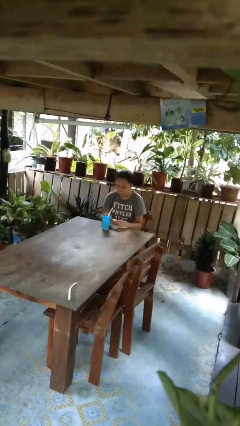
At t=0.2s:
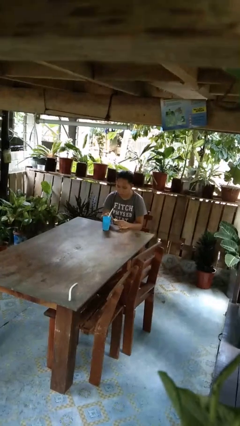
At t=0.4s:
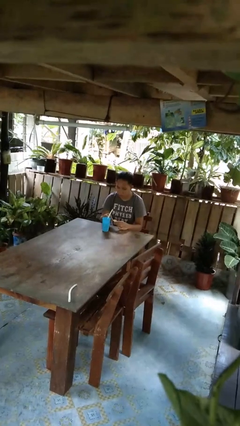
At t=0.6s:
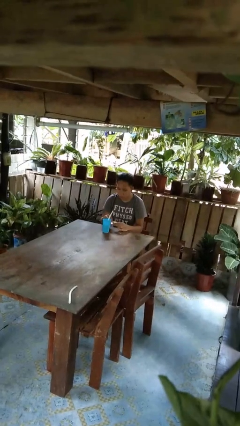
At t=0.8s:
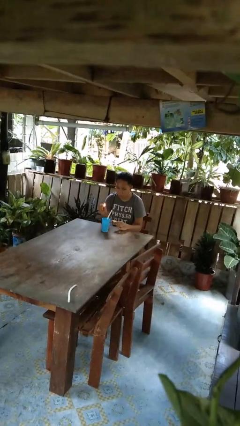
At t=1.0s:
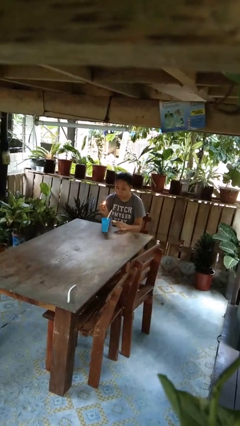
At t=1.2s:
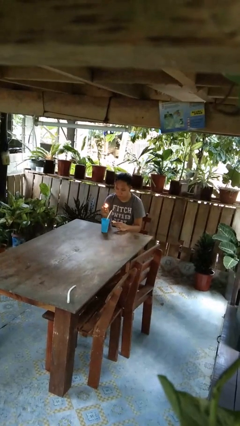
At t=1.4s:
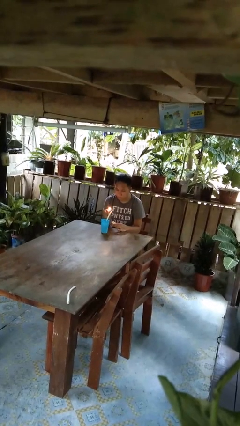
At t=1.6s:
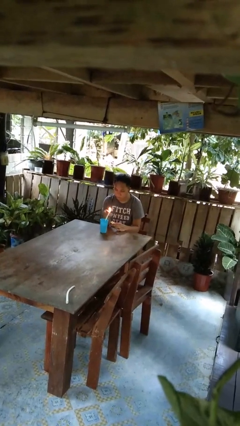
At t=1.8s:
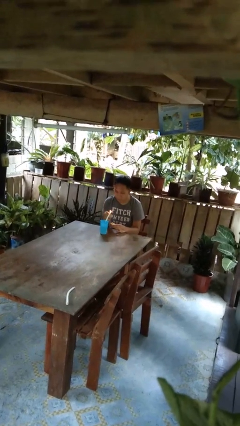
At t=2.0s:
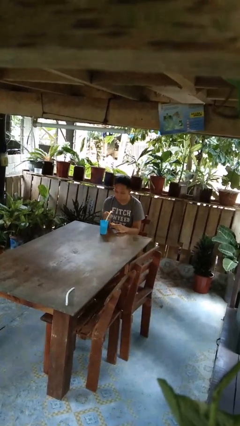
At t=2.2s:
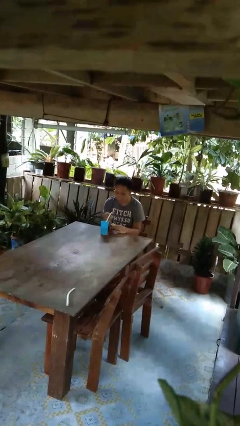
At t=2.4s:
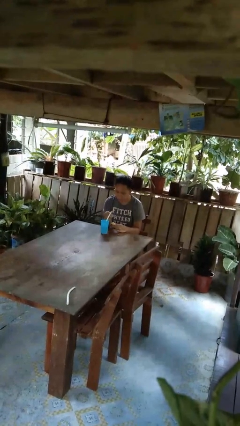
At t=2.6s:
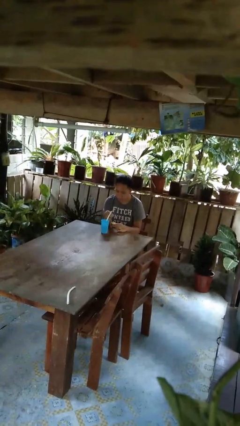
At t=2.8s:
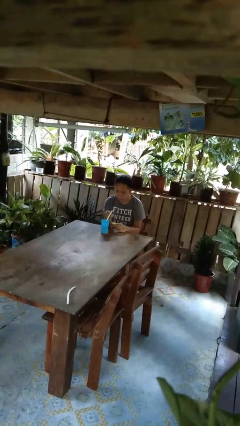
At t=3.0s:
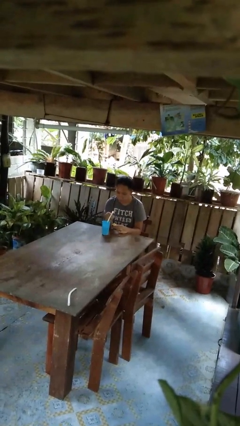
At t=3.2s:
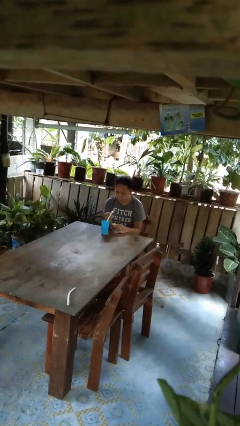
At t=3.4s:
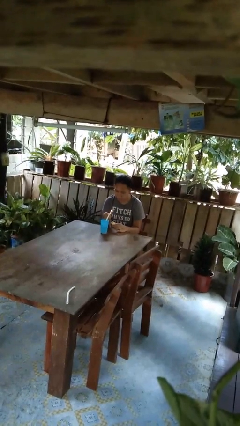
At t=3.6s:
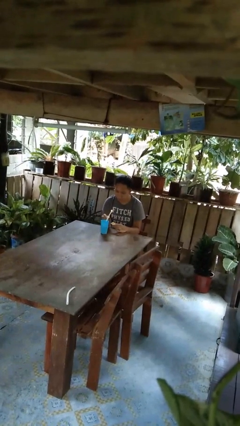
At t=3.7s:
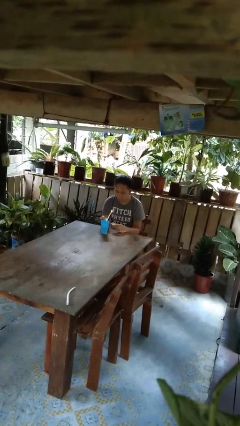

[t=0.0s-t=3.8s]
person lights candle

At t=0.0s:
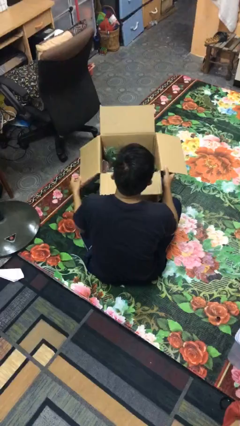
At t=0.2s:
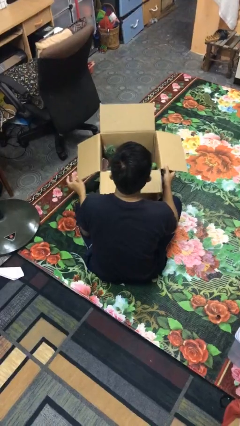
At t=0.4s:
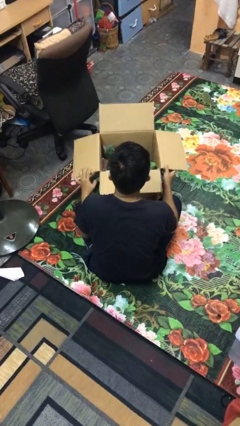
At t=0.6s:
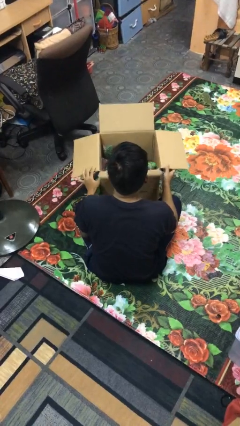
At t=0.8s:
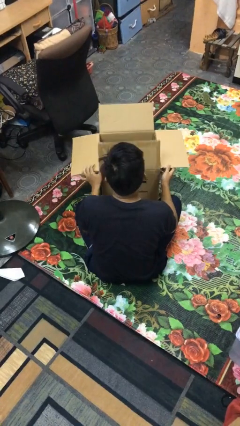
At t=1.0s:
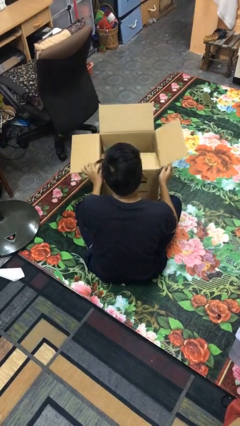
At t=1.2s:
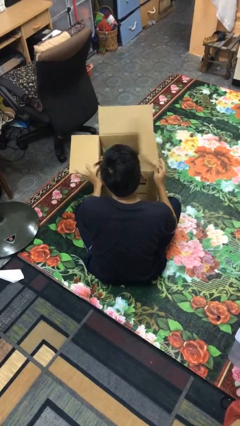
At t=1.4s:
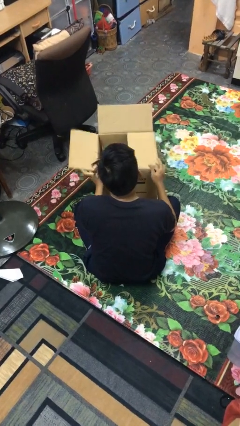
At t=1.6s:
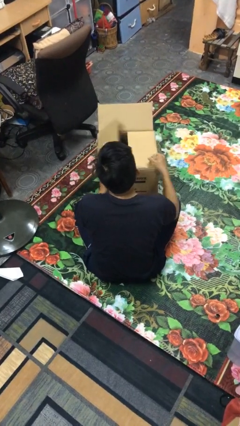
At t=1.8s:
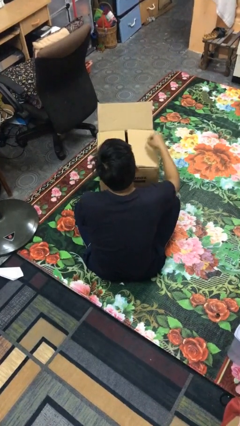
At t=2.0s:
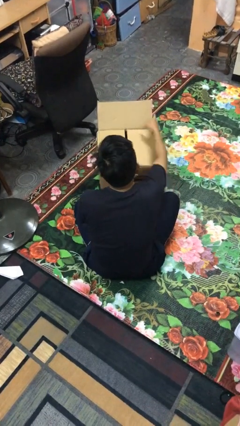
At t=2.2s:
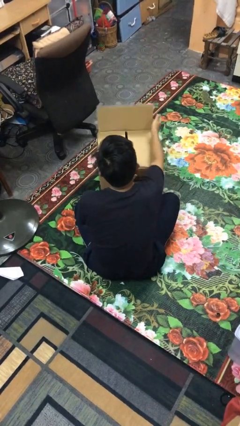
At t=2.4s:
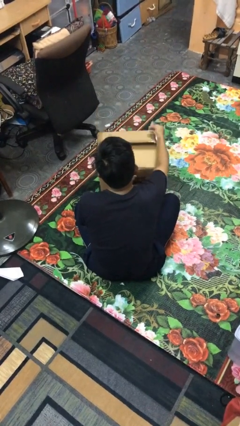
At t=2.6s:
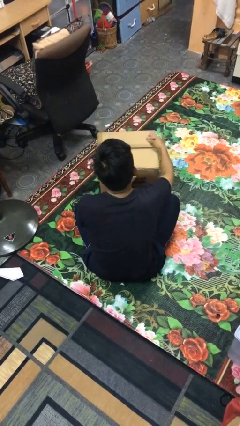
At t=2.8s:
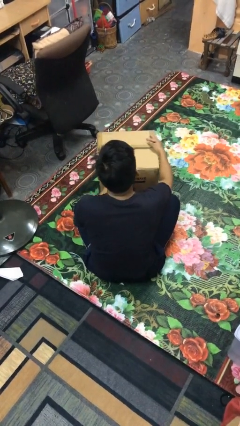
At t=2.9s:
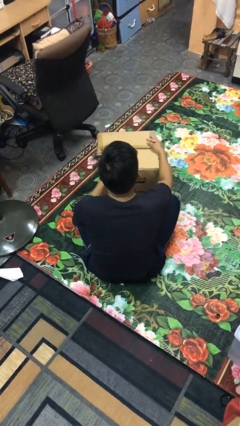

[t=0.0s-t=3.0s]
person closes box

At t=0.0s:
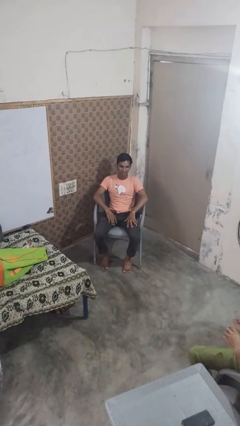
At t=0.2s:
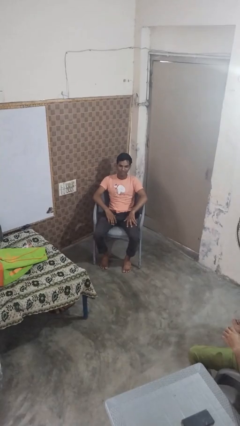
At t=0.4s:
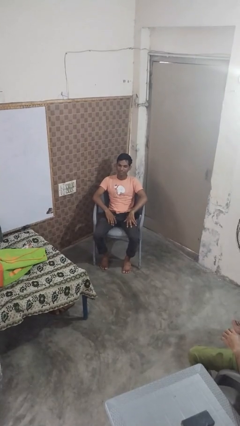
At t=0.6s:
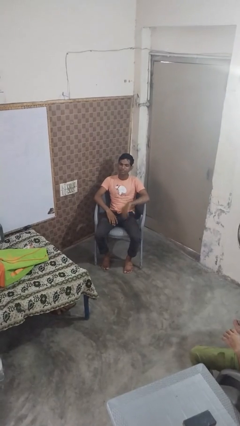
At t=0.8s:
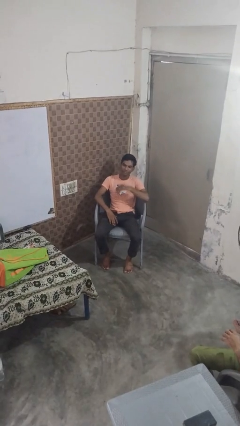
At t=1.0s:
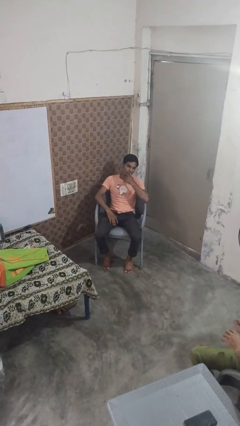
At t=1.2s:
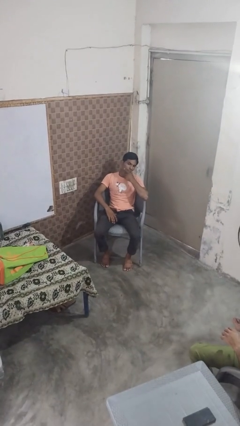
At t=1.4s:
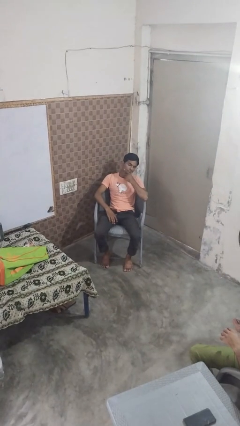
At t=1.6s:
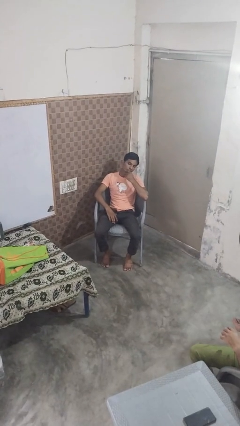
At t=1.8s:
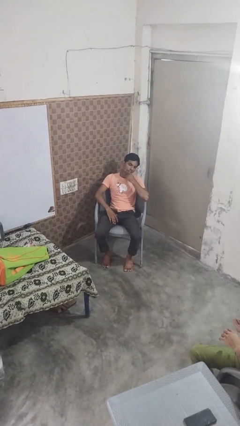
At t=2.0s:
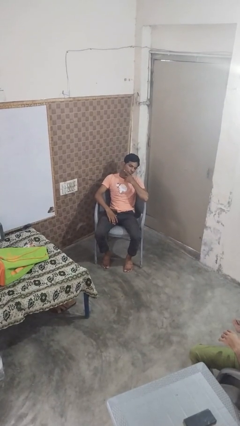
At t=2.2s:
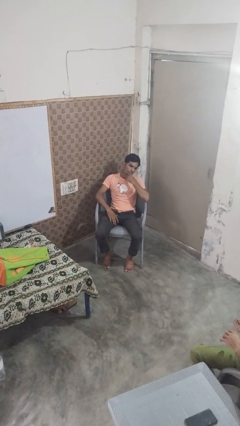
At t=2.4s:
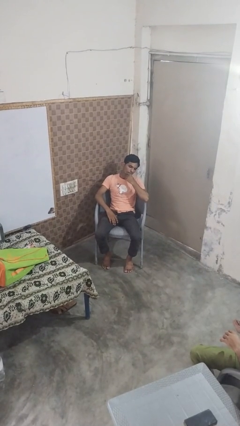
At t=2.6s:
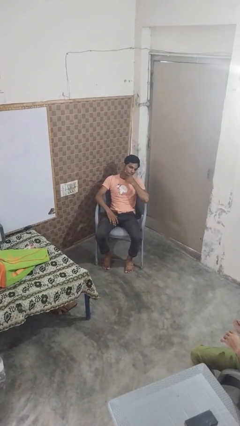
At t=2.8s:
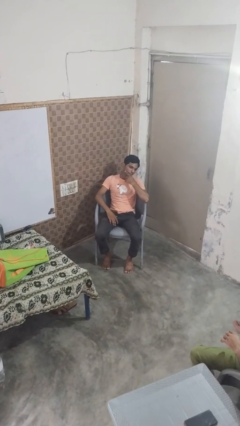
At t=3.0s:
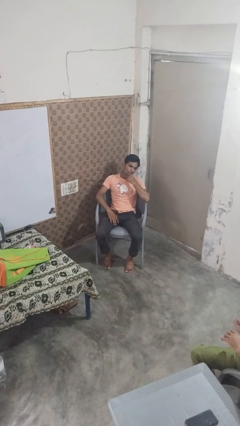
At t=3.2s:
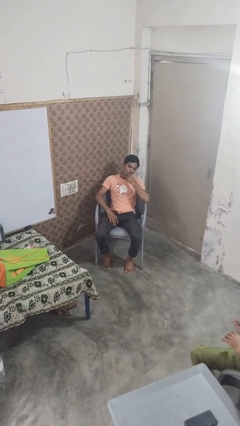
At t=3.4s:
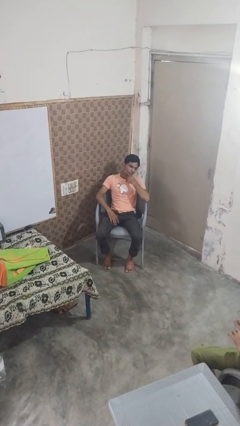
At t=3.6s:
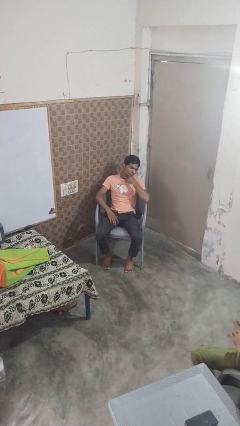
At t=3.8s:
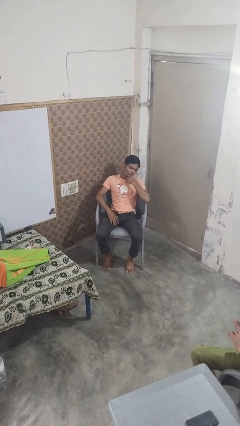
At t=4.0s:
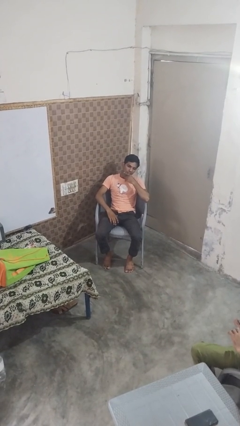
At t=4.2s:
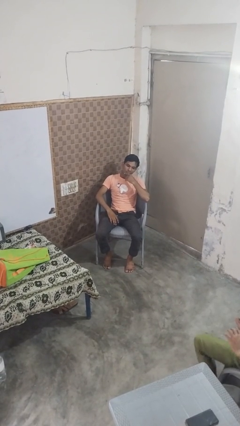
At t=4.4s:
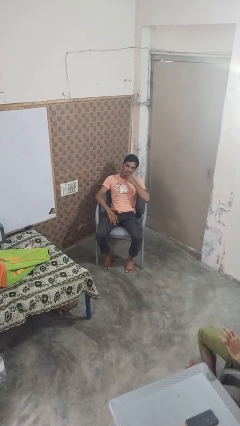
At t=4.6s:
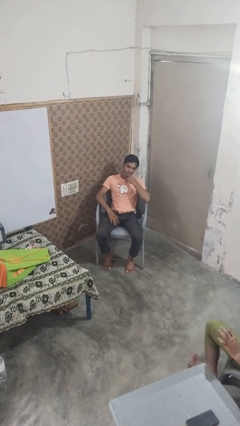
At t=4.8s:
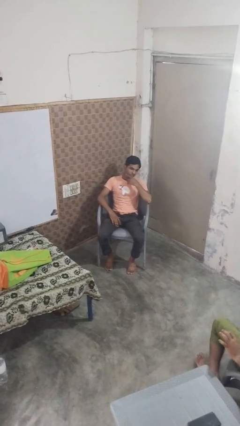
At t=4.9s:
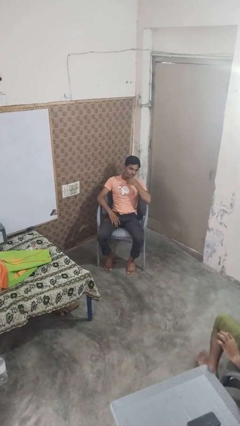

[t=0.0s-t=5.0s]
person strokes chin

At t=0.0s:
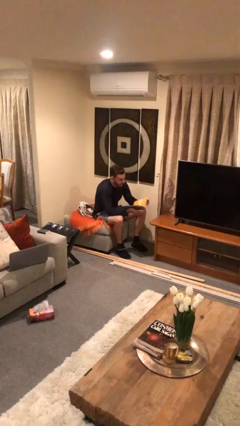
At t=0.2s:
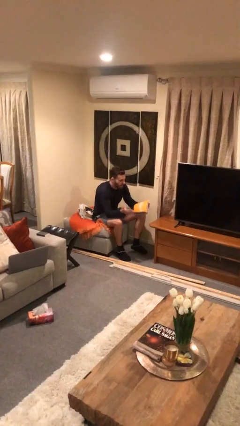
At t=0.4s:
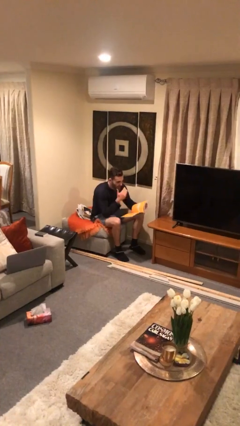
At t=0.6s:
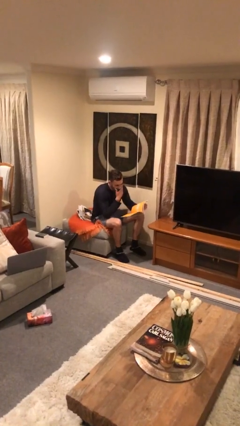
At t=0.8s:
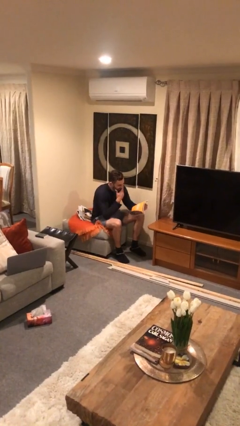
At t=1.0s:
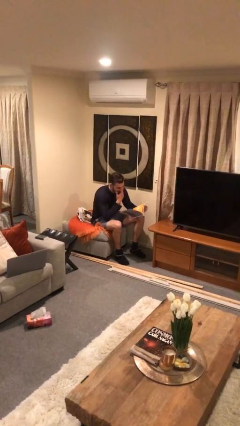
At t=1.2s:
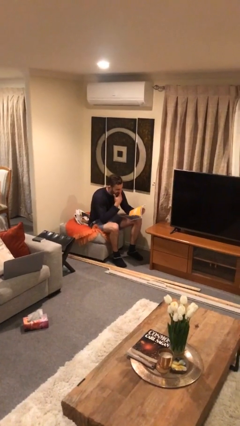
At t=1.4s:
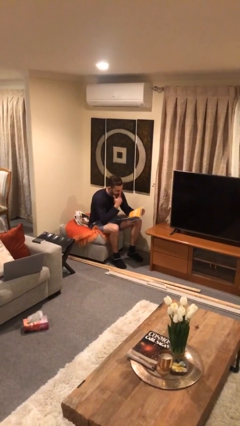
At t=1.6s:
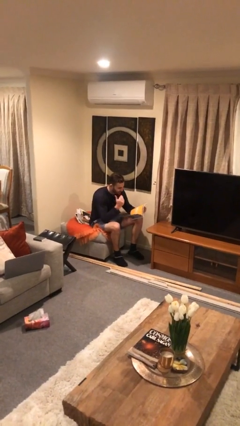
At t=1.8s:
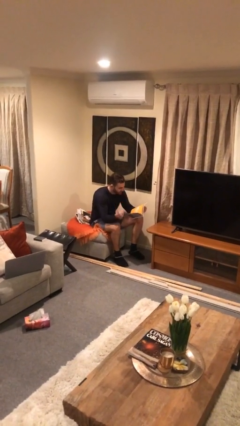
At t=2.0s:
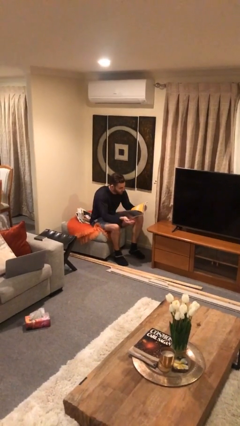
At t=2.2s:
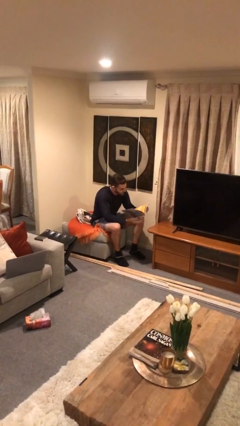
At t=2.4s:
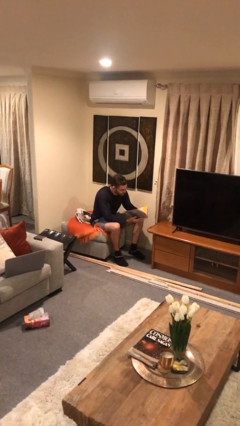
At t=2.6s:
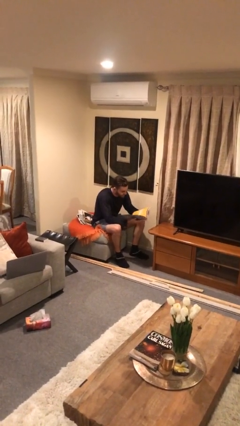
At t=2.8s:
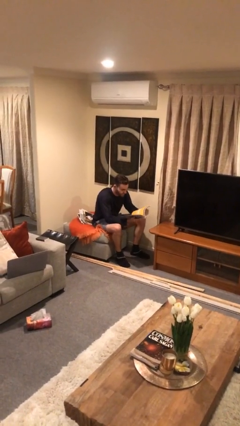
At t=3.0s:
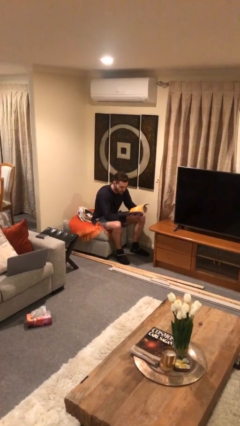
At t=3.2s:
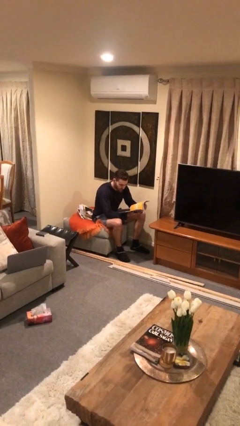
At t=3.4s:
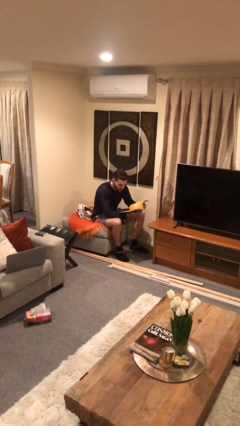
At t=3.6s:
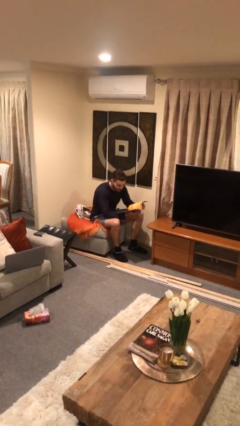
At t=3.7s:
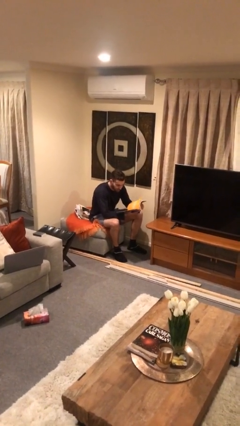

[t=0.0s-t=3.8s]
person reads document

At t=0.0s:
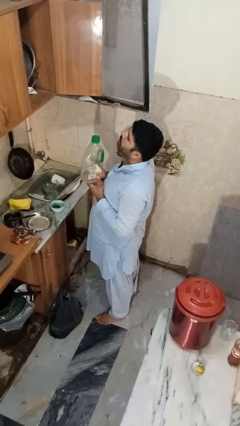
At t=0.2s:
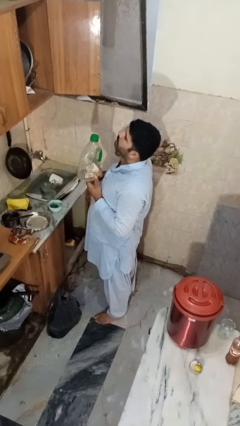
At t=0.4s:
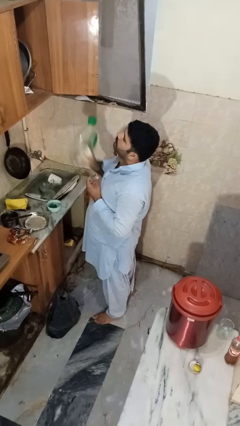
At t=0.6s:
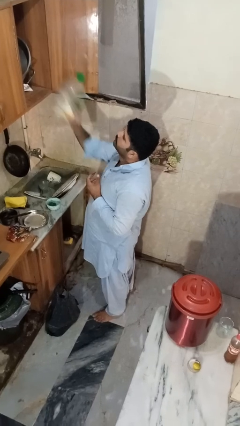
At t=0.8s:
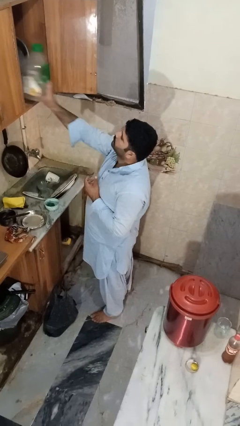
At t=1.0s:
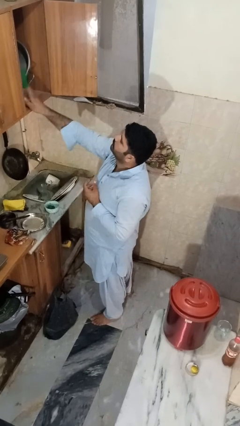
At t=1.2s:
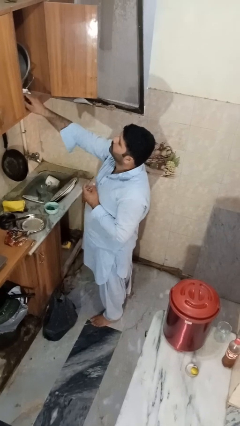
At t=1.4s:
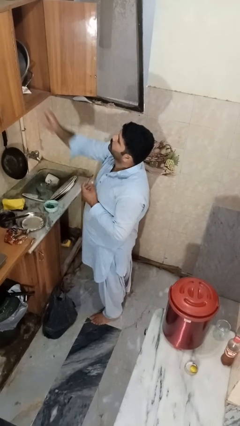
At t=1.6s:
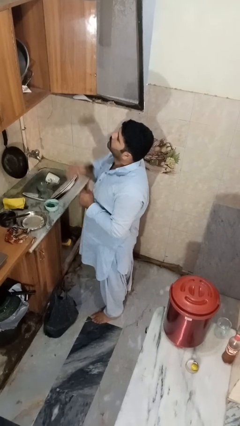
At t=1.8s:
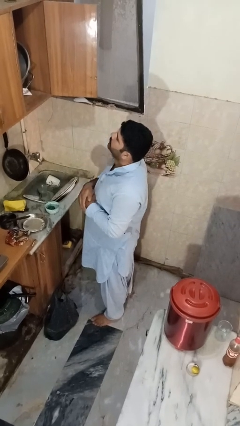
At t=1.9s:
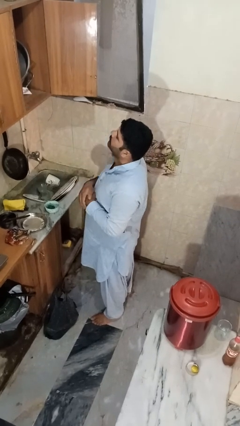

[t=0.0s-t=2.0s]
person puts object in cabinet
